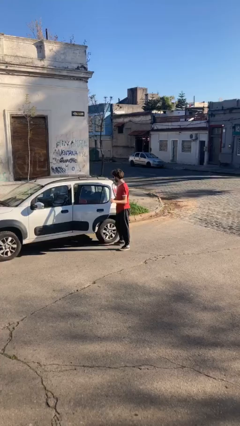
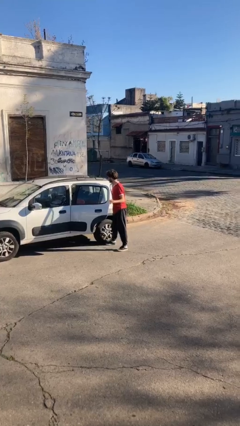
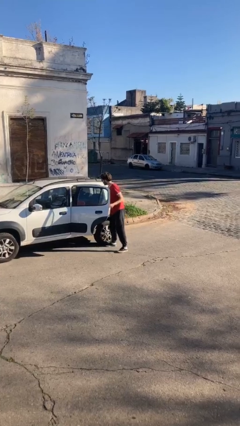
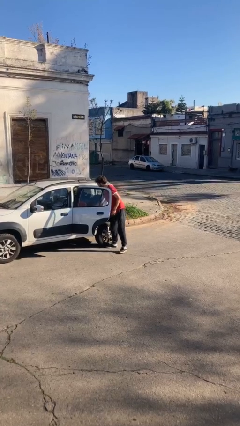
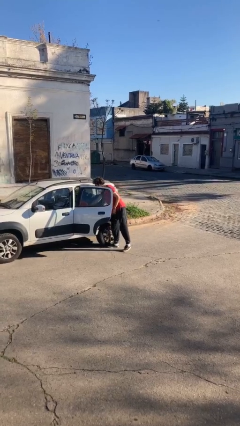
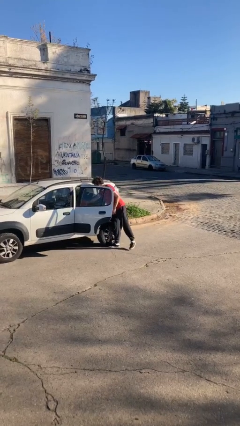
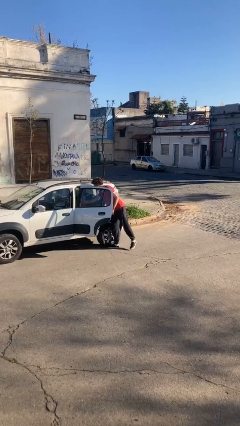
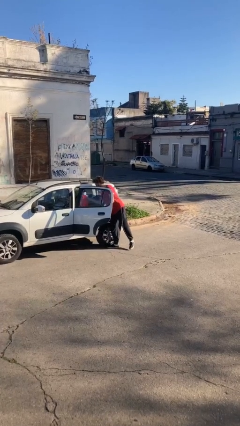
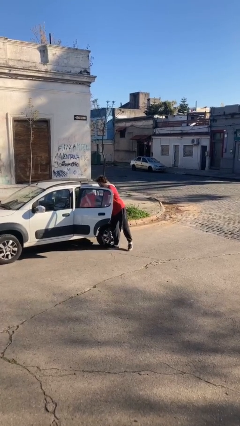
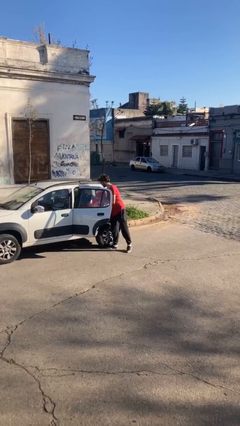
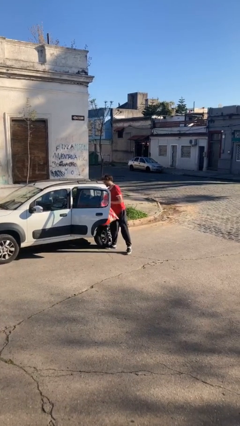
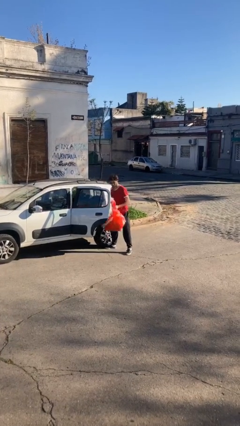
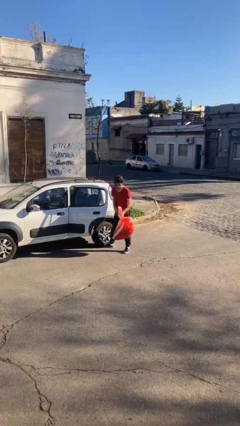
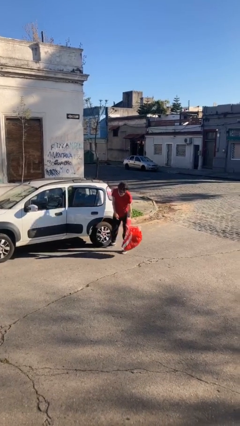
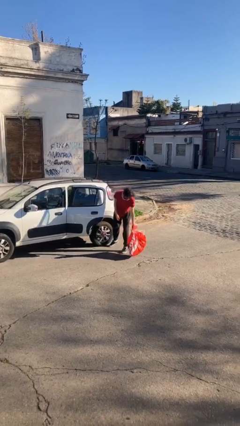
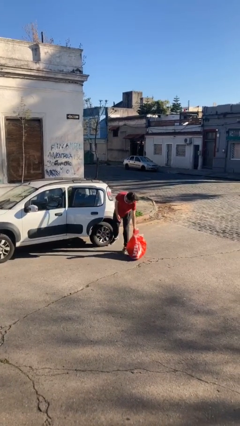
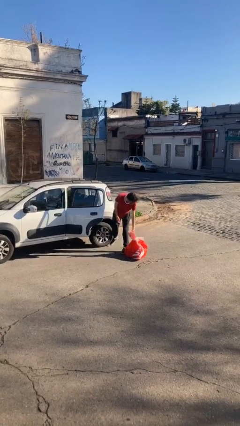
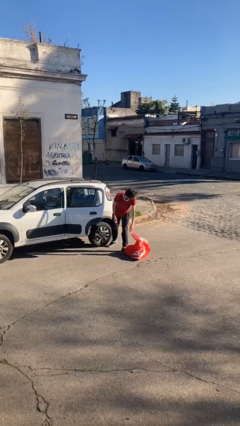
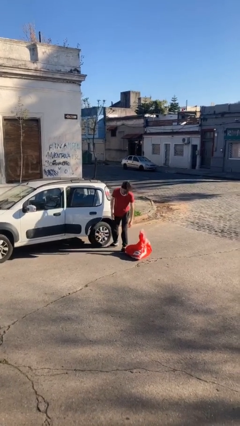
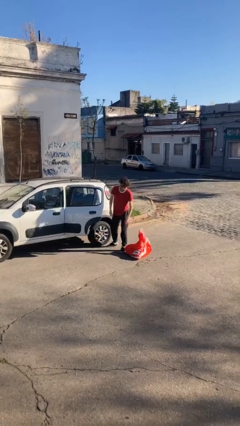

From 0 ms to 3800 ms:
person unloads car

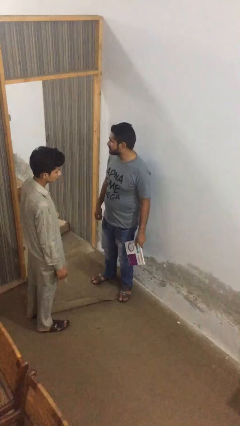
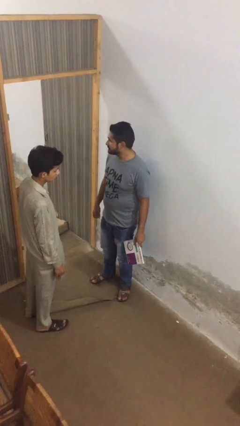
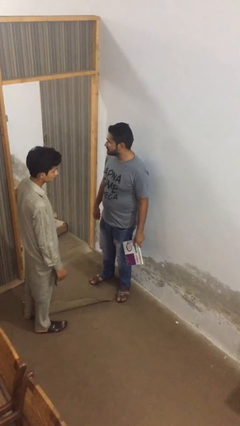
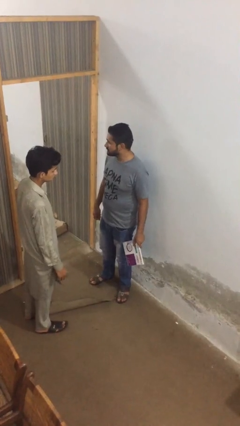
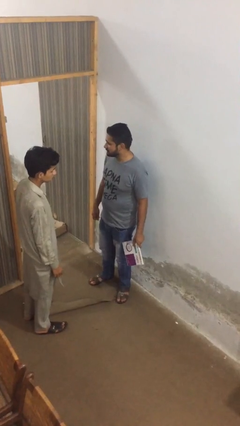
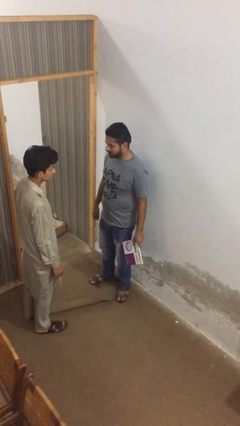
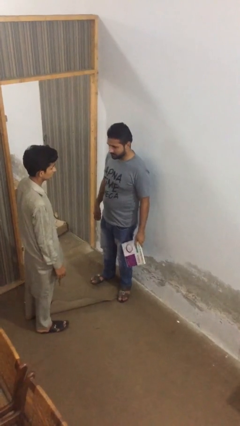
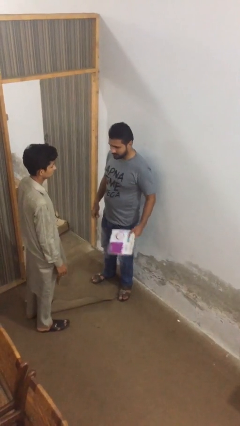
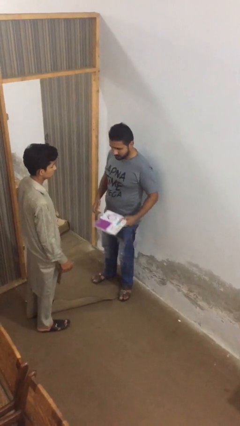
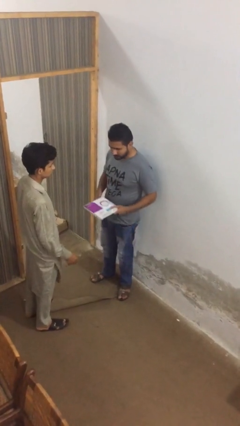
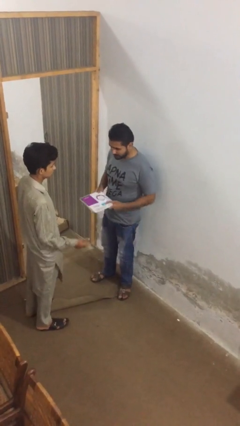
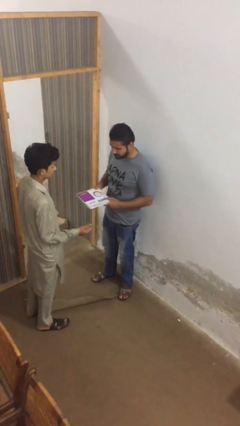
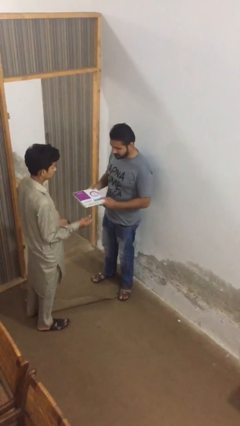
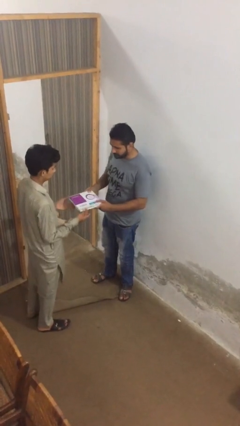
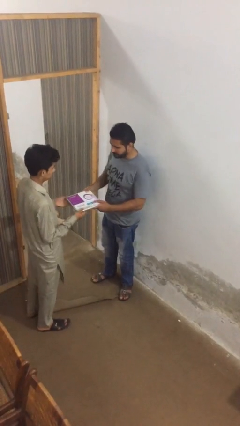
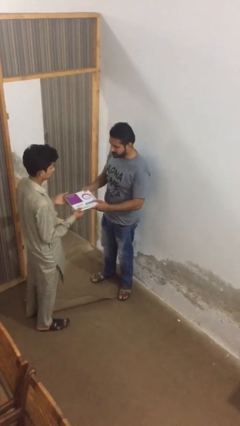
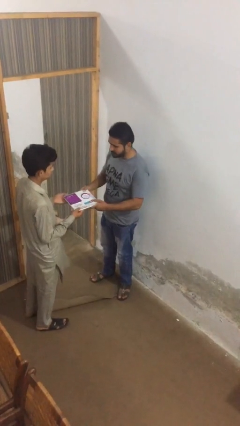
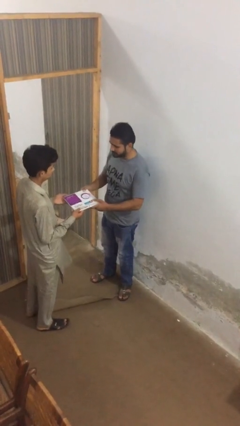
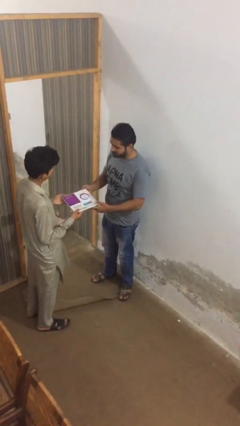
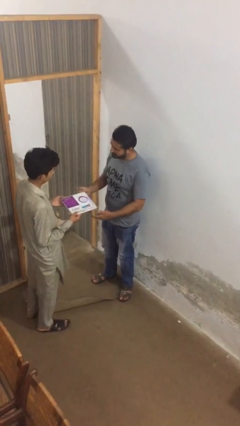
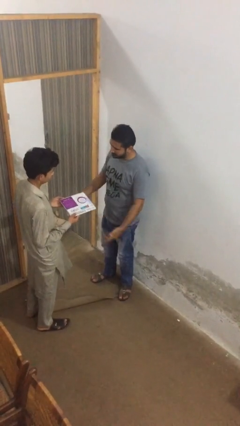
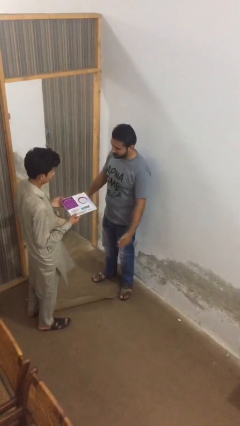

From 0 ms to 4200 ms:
person transfers object to person

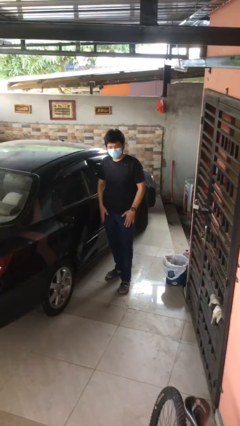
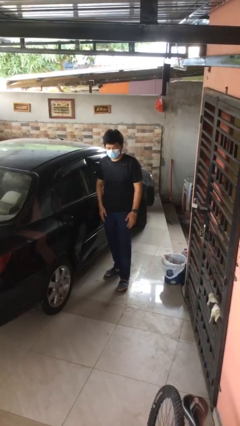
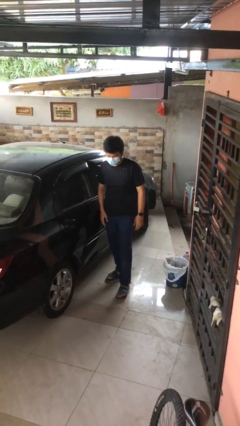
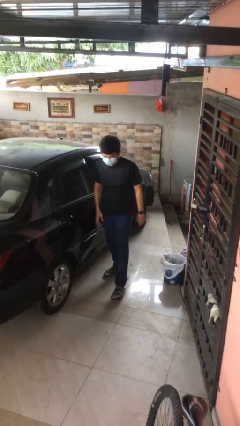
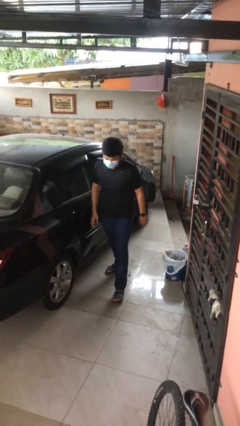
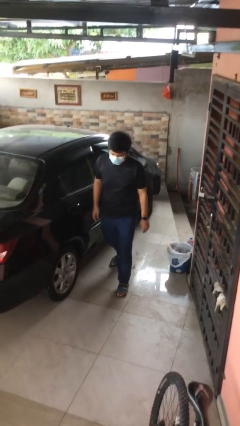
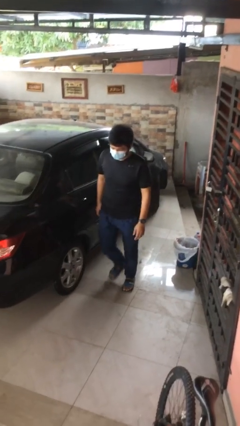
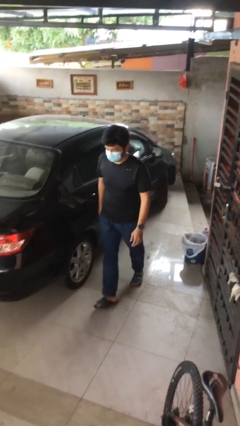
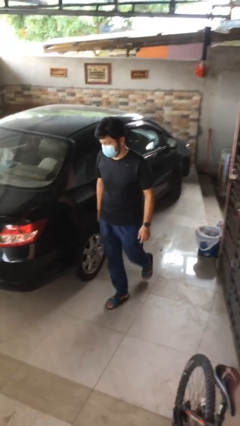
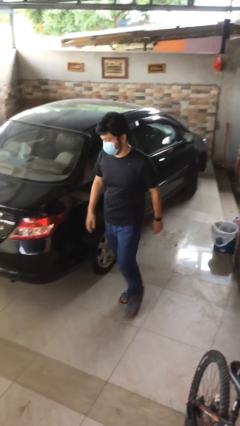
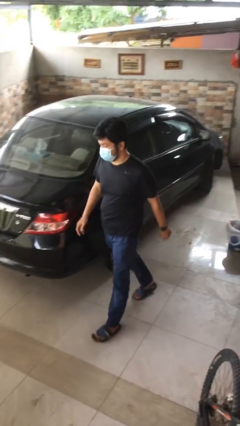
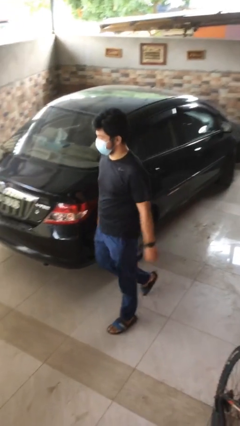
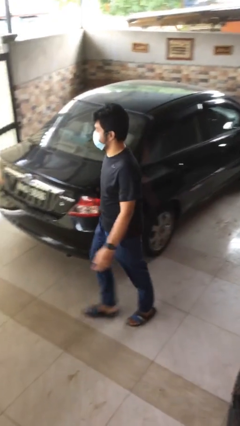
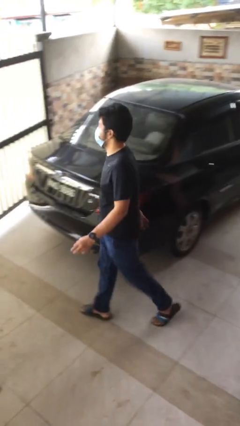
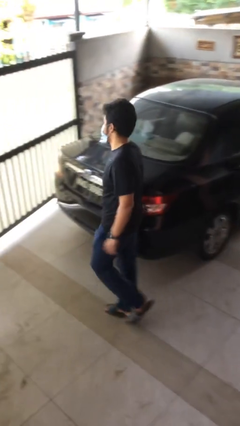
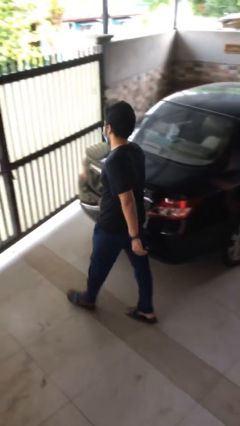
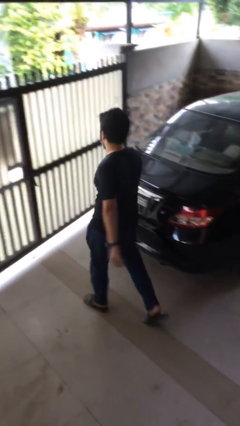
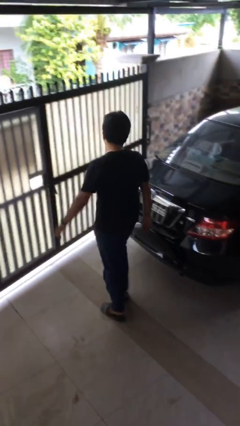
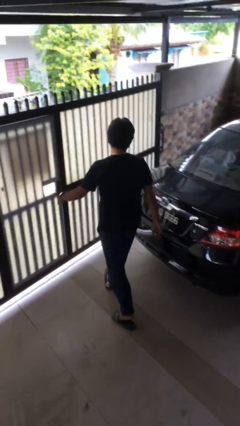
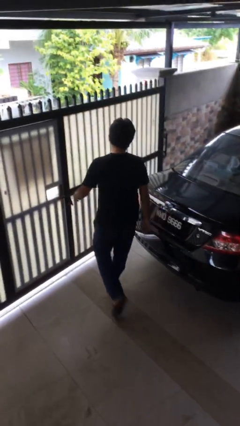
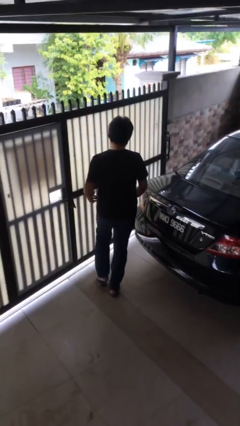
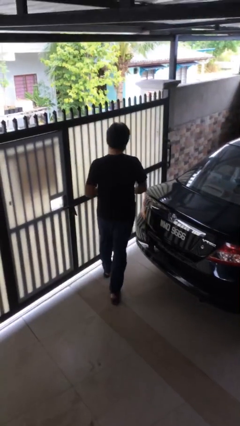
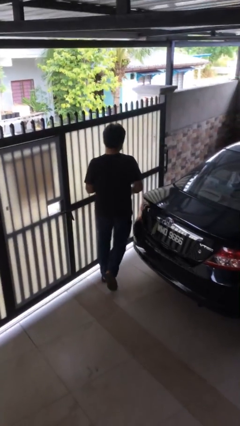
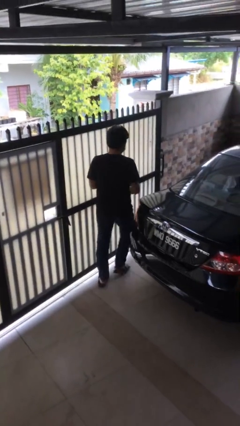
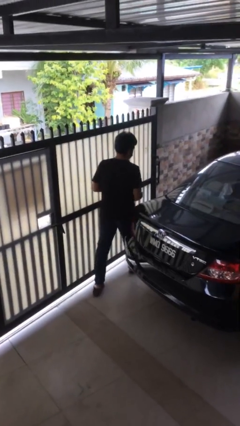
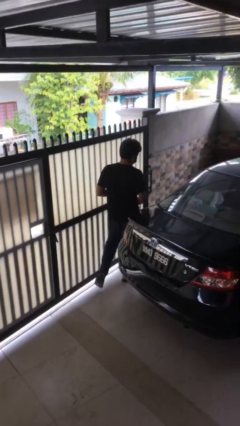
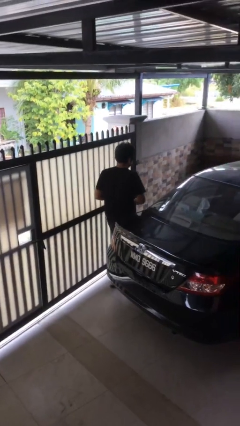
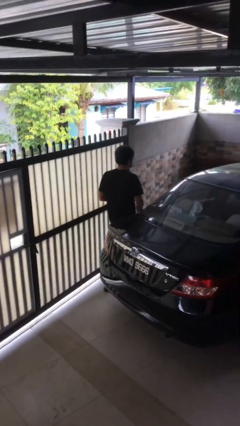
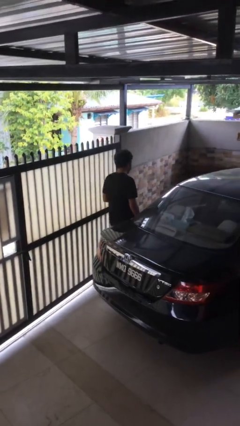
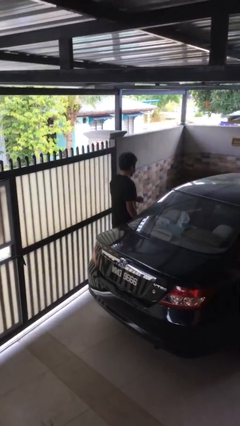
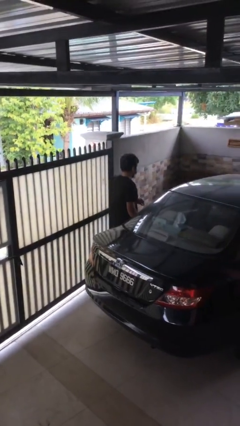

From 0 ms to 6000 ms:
person walks around car

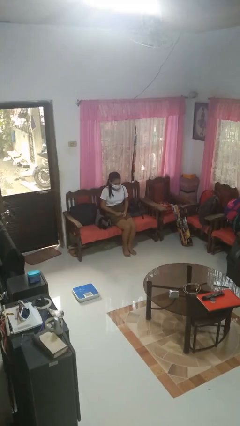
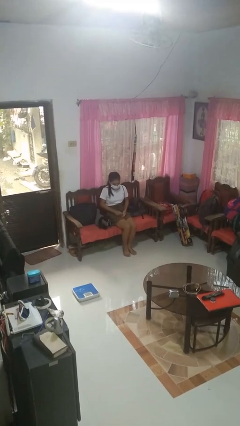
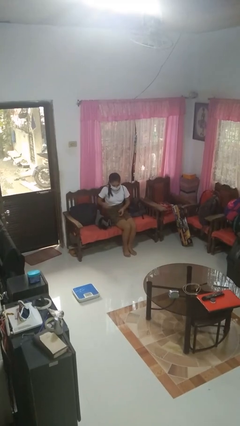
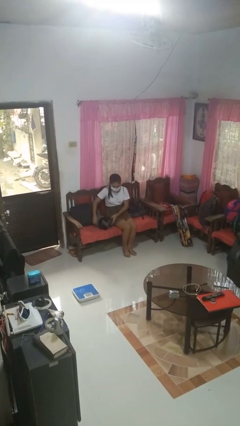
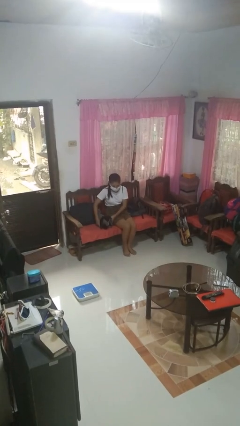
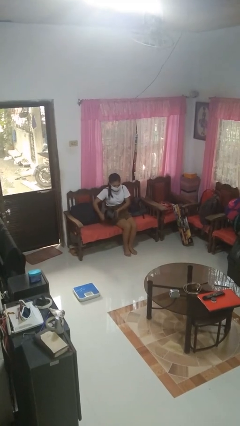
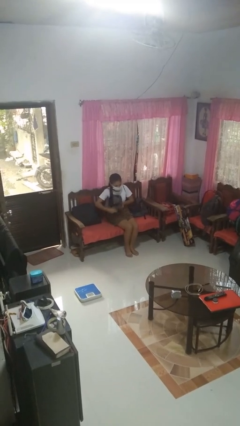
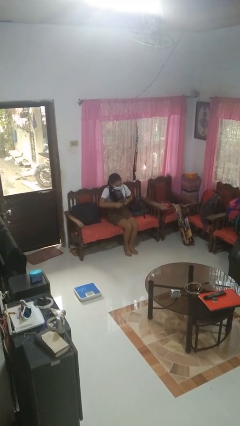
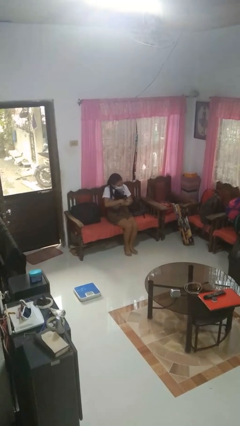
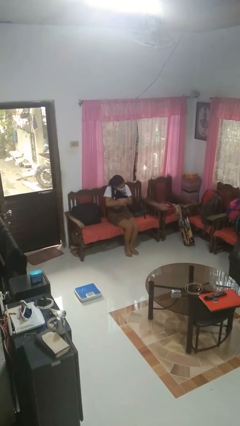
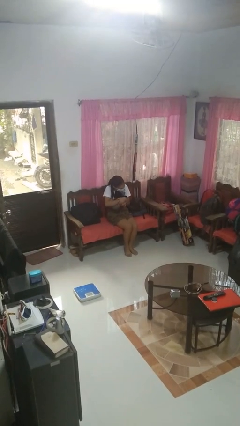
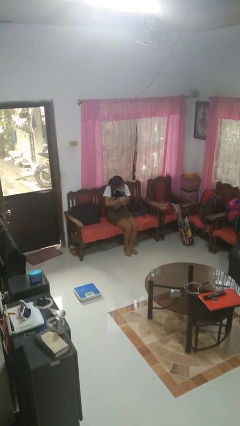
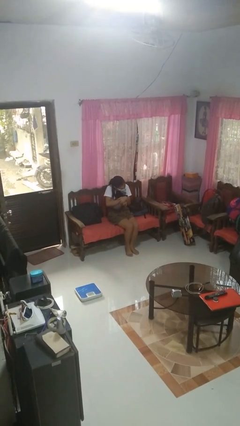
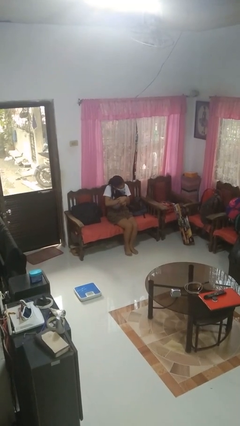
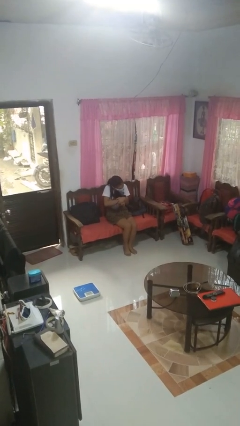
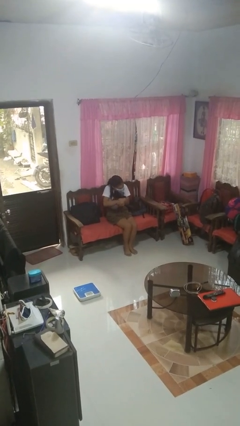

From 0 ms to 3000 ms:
person hugs stuffed animal

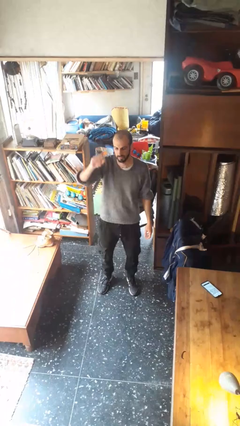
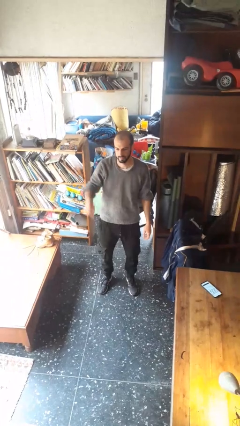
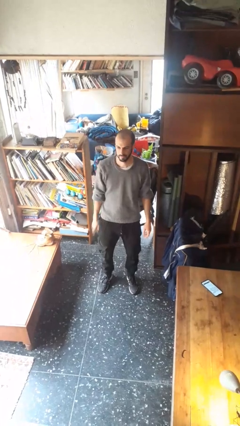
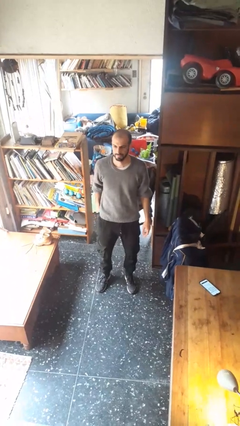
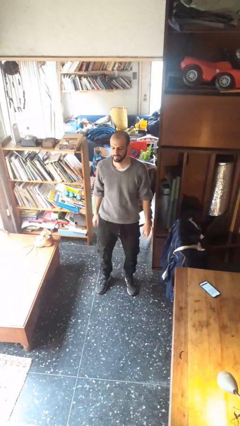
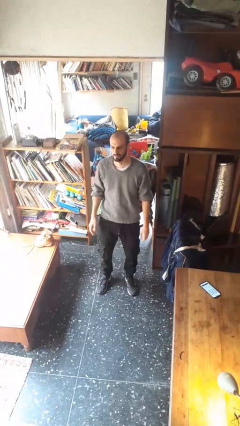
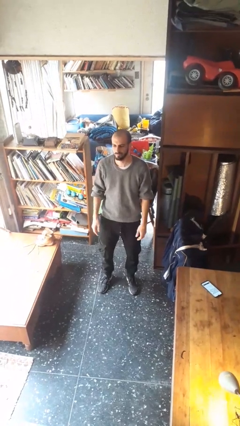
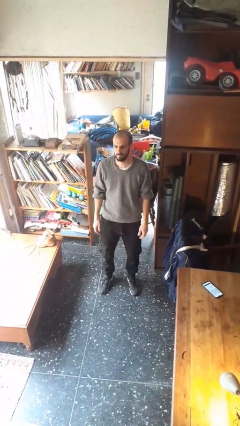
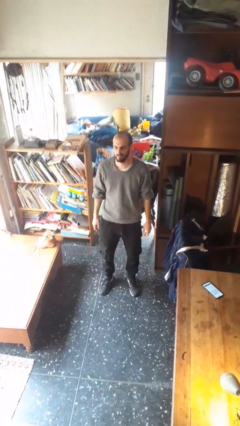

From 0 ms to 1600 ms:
person gestures lower hand
